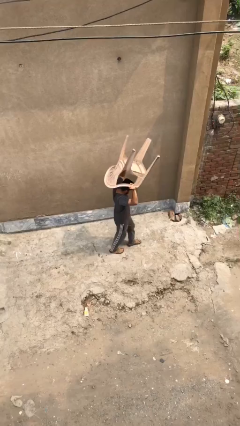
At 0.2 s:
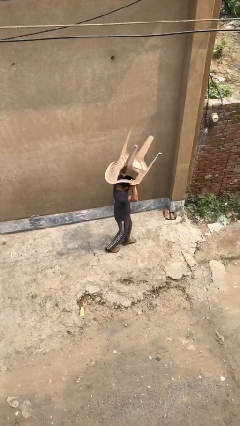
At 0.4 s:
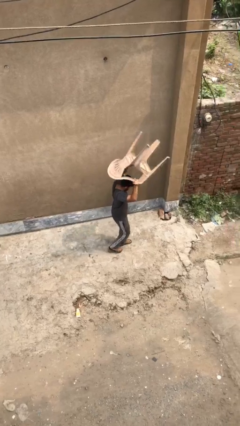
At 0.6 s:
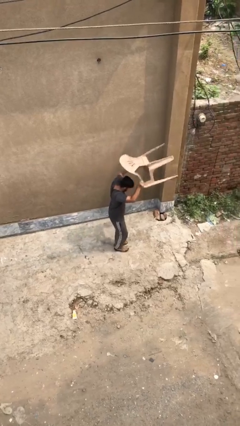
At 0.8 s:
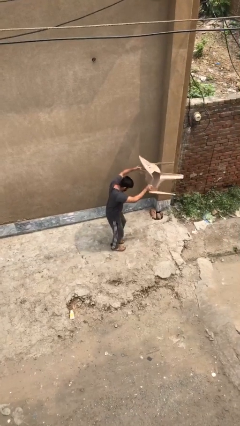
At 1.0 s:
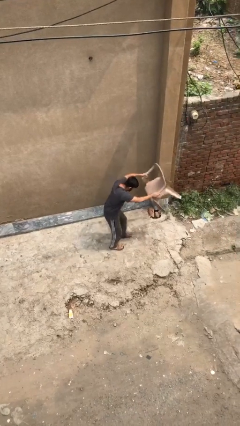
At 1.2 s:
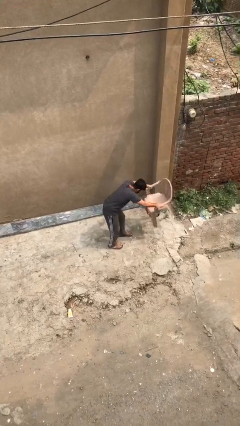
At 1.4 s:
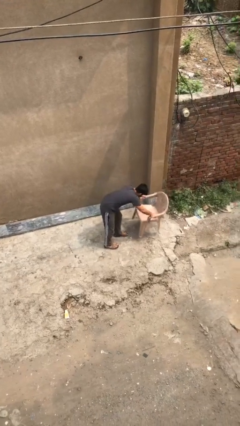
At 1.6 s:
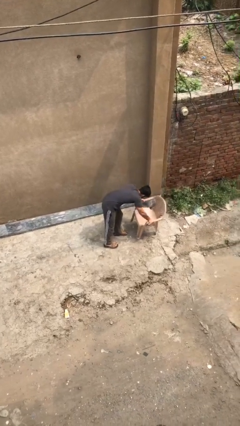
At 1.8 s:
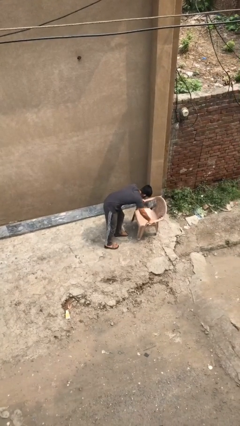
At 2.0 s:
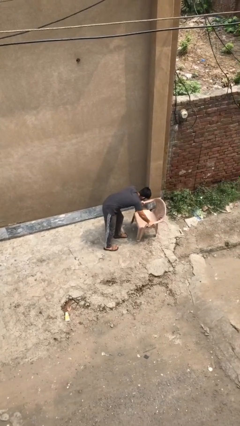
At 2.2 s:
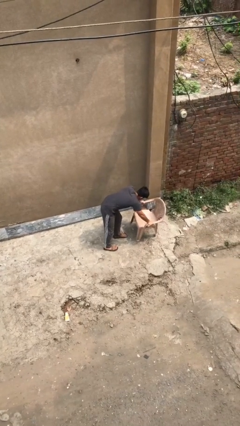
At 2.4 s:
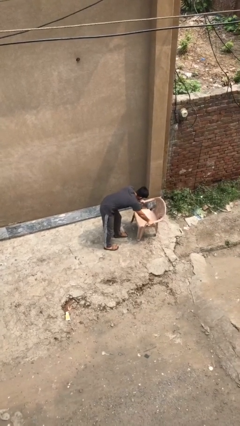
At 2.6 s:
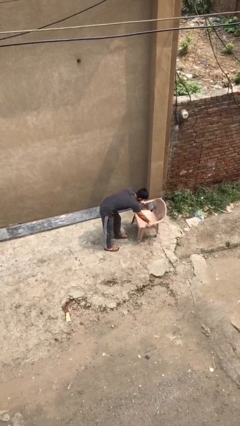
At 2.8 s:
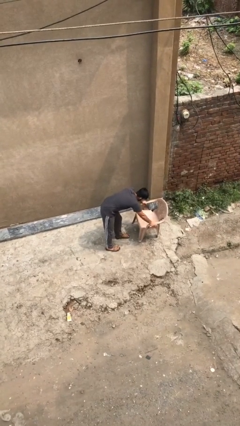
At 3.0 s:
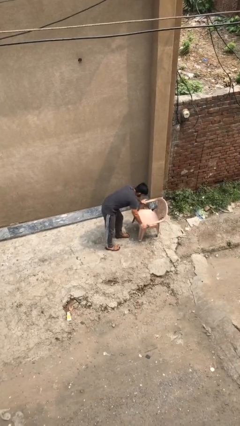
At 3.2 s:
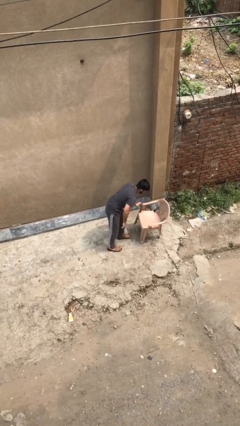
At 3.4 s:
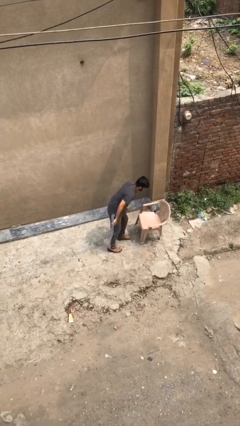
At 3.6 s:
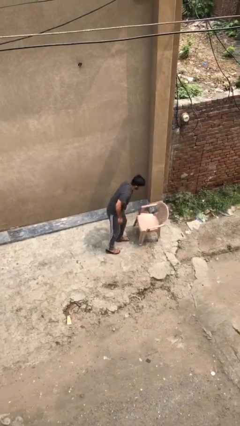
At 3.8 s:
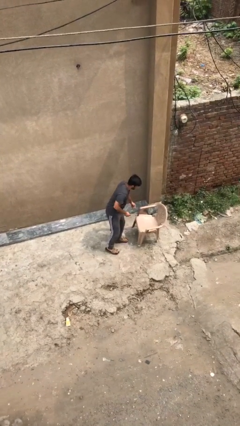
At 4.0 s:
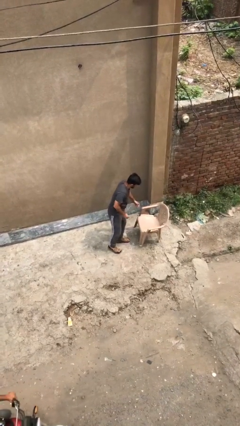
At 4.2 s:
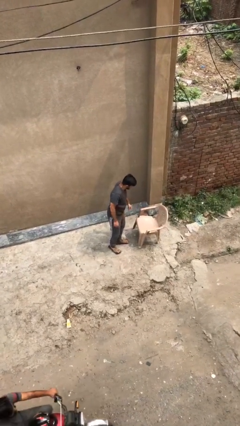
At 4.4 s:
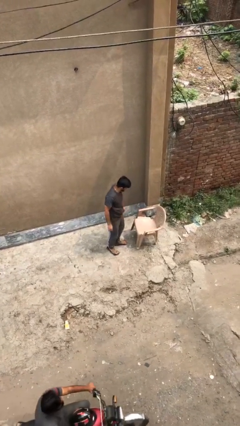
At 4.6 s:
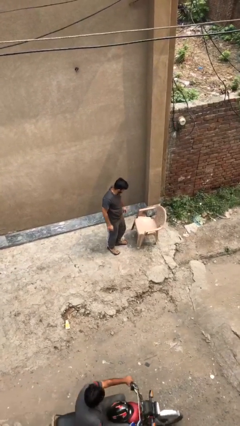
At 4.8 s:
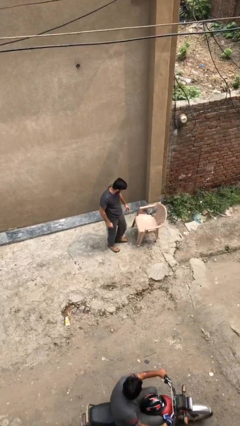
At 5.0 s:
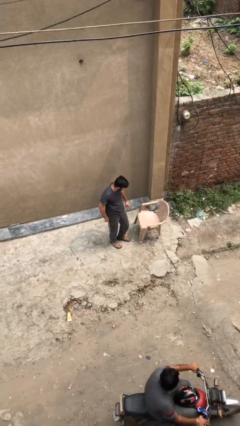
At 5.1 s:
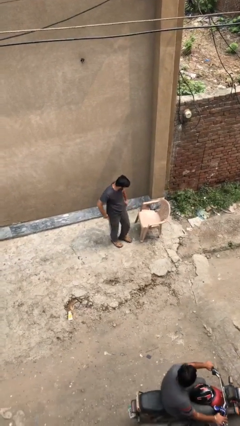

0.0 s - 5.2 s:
person puts down object on floor

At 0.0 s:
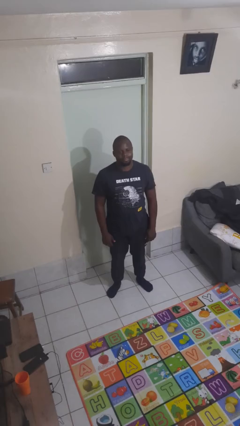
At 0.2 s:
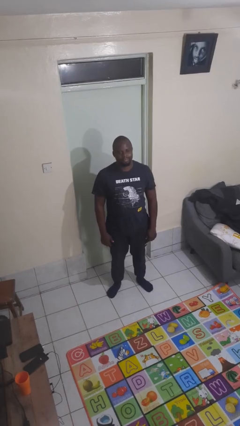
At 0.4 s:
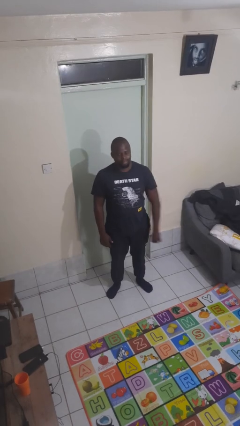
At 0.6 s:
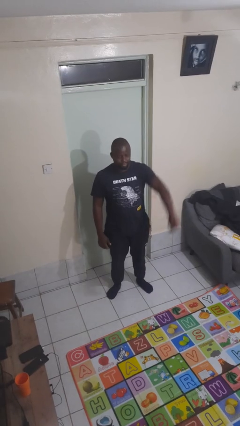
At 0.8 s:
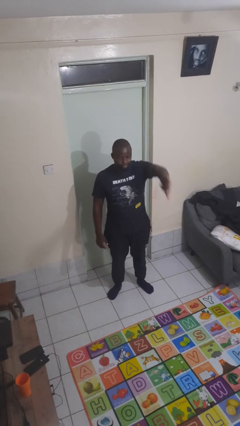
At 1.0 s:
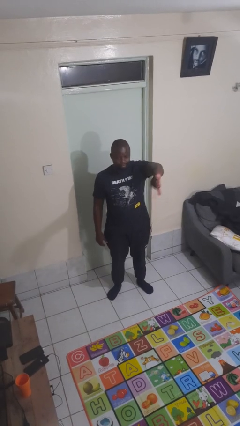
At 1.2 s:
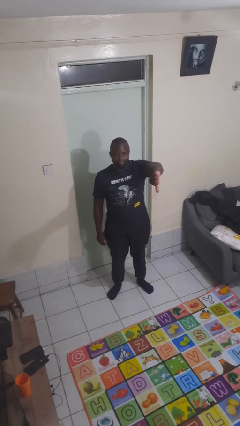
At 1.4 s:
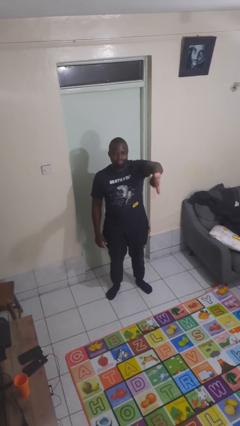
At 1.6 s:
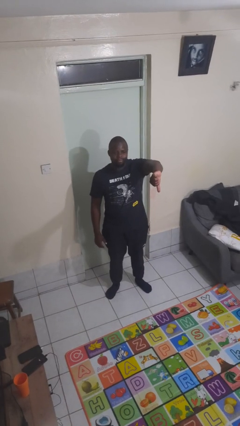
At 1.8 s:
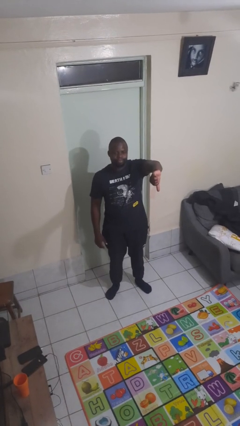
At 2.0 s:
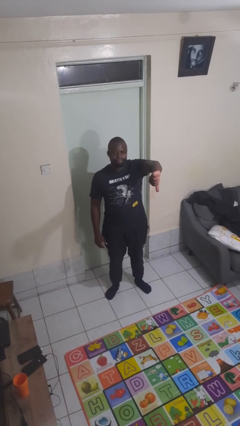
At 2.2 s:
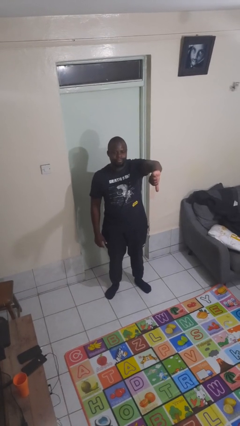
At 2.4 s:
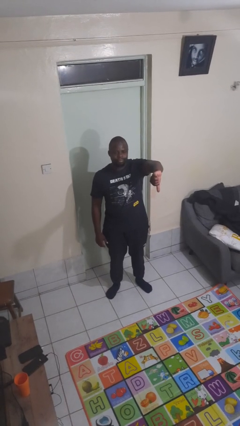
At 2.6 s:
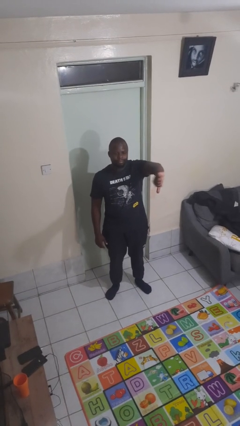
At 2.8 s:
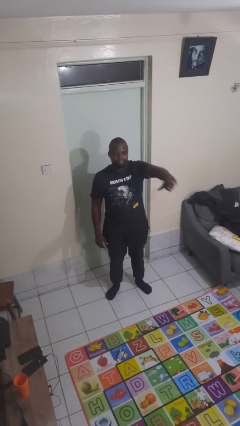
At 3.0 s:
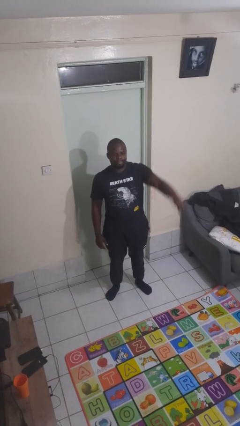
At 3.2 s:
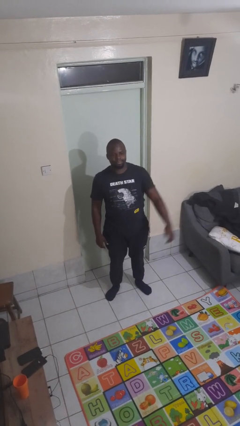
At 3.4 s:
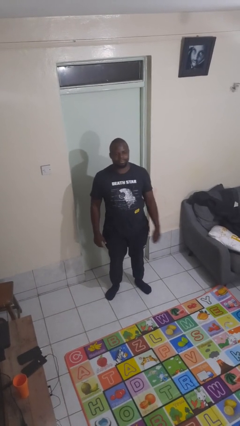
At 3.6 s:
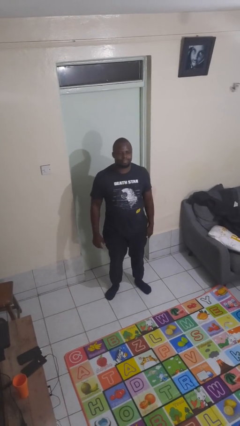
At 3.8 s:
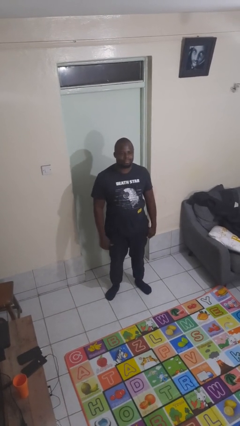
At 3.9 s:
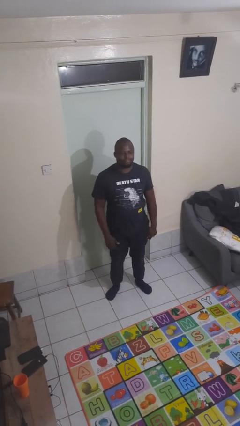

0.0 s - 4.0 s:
person gestures thumbs down

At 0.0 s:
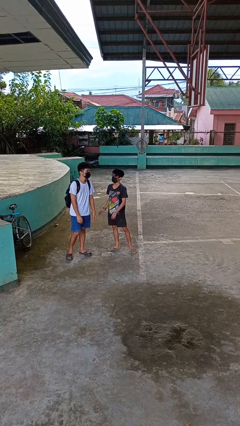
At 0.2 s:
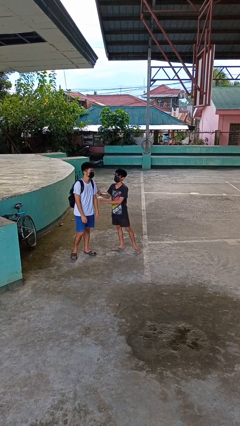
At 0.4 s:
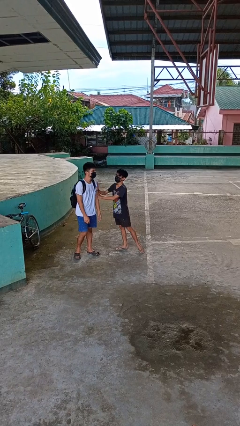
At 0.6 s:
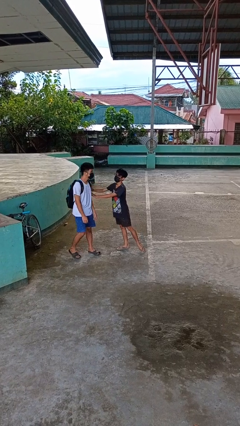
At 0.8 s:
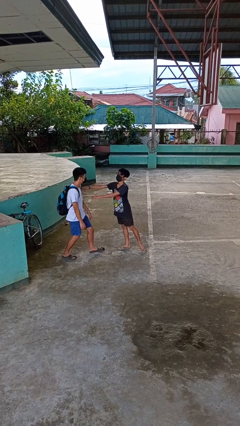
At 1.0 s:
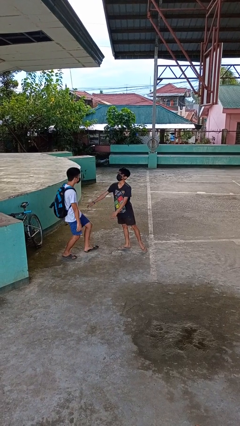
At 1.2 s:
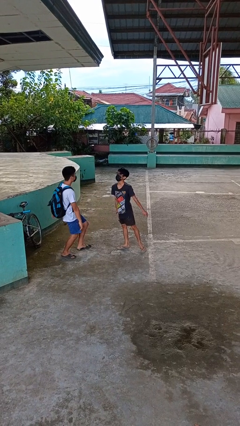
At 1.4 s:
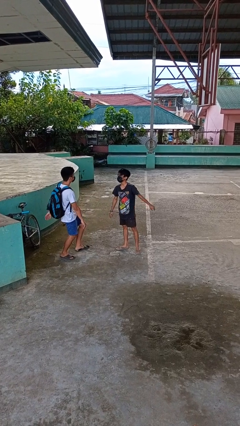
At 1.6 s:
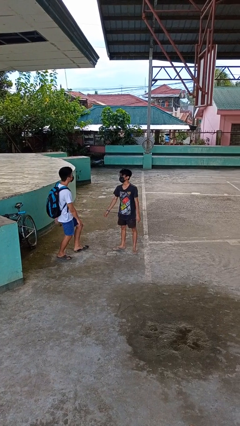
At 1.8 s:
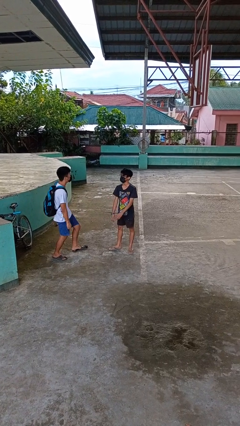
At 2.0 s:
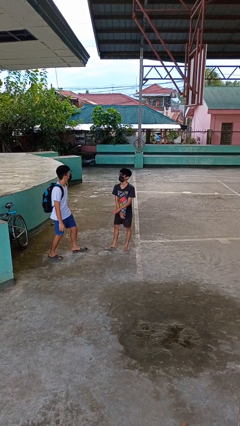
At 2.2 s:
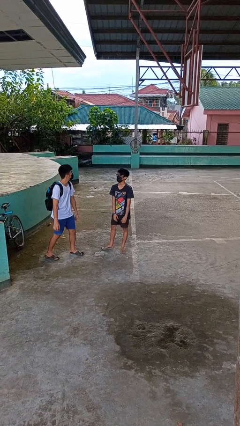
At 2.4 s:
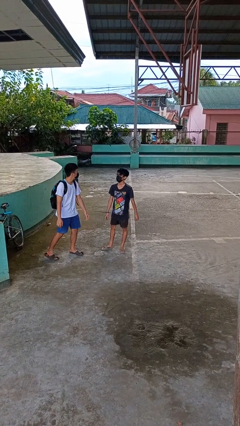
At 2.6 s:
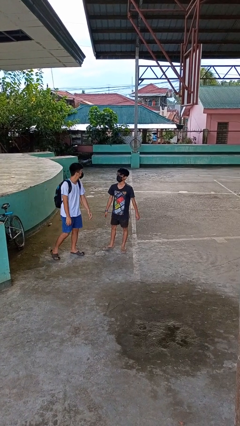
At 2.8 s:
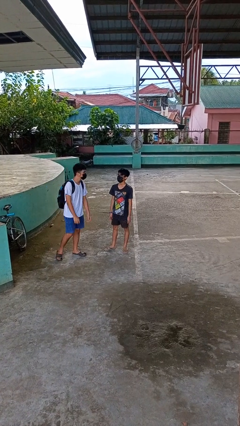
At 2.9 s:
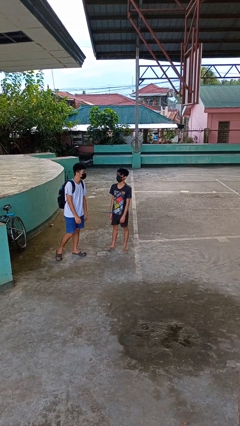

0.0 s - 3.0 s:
person shoves person

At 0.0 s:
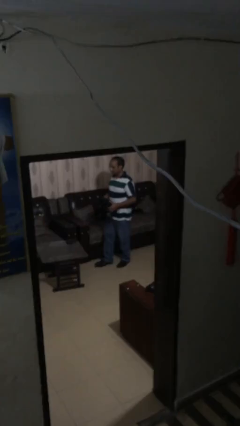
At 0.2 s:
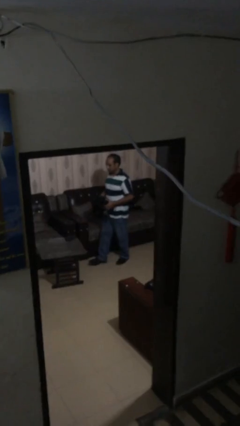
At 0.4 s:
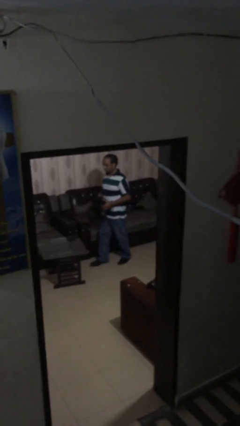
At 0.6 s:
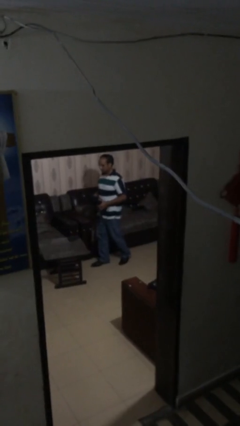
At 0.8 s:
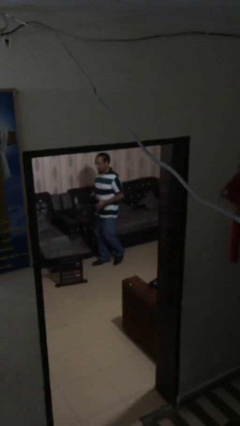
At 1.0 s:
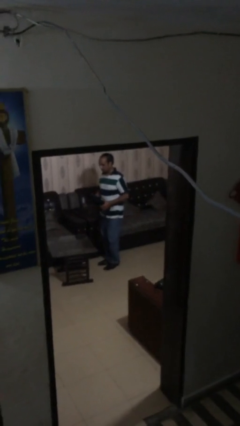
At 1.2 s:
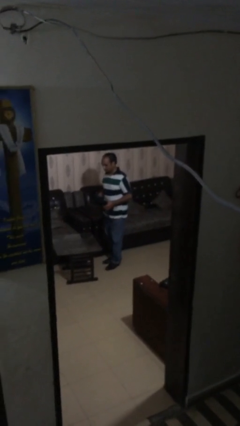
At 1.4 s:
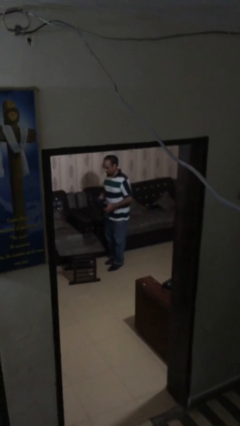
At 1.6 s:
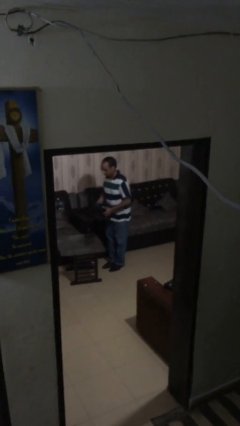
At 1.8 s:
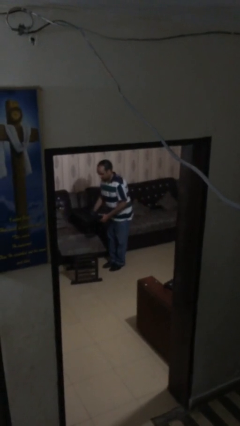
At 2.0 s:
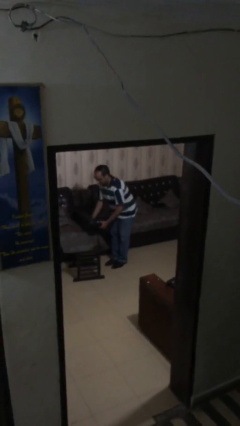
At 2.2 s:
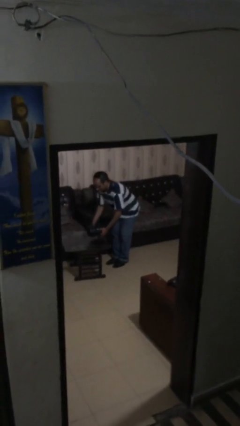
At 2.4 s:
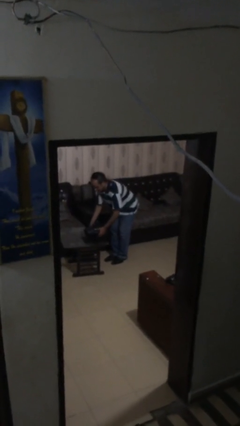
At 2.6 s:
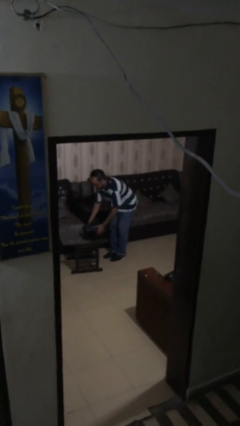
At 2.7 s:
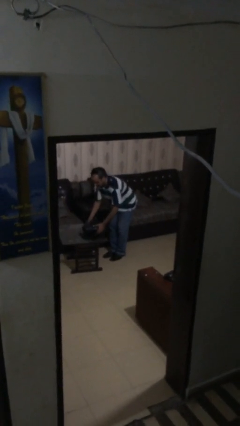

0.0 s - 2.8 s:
person puts down object on table

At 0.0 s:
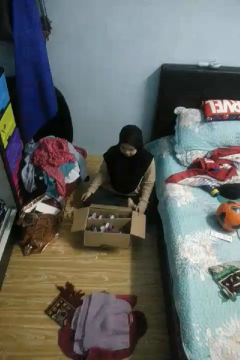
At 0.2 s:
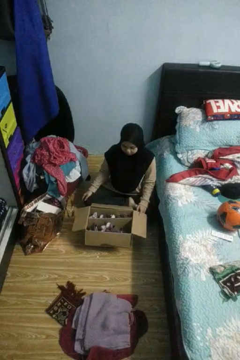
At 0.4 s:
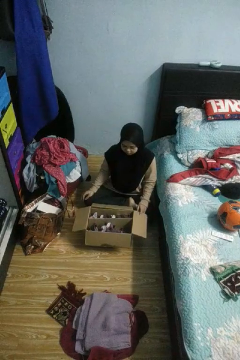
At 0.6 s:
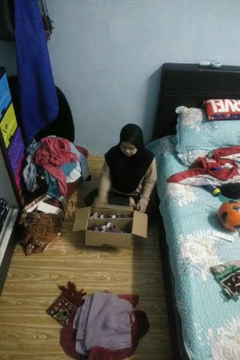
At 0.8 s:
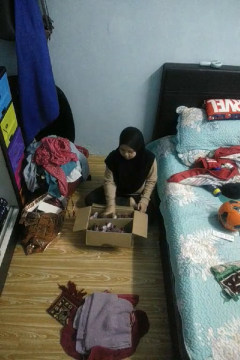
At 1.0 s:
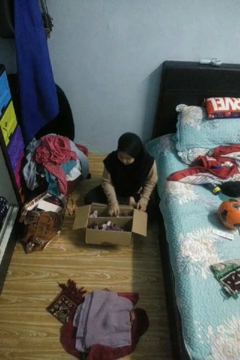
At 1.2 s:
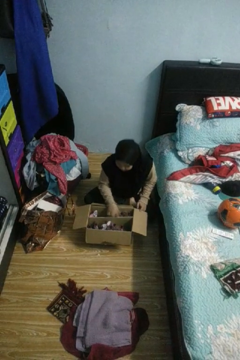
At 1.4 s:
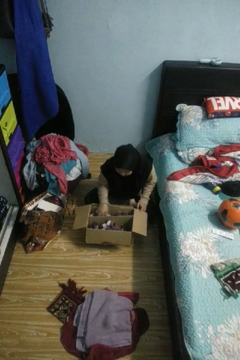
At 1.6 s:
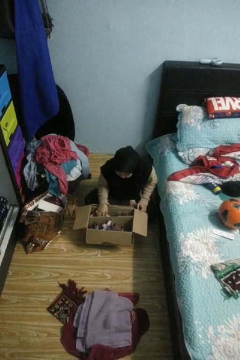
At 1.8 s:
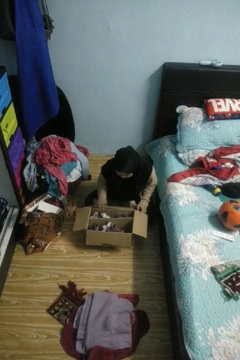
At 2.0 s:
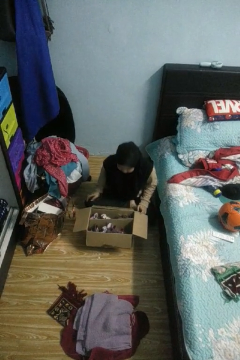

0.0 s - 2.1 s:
person searches in box

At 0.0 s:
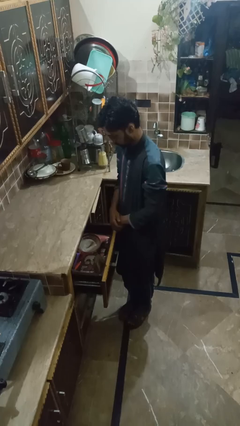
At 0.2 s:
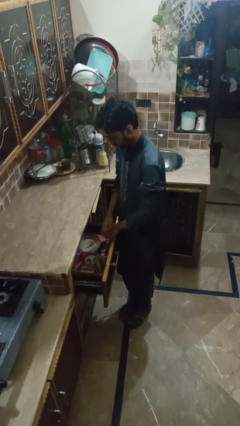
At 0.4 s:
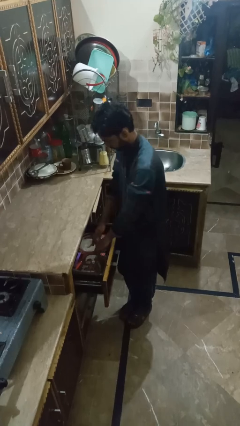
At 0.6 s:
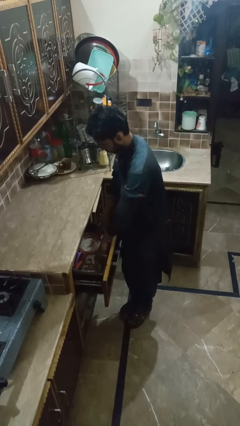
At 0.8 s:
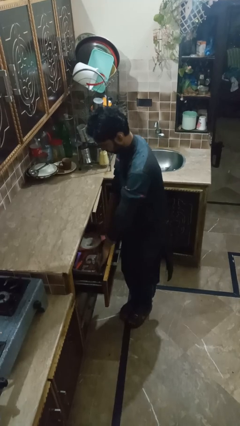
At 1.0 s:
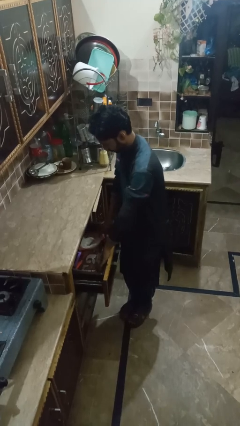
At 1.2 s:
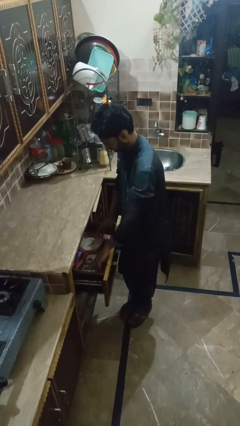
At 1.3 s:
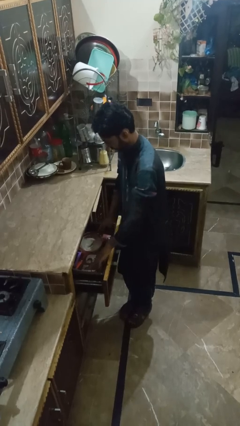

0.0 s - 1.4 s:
person searches in kitchen drawer
